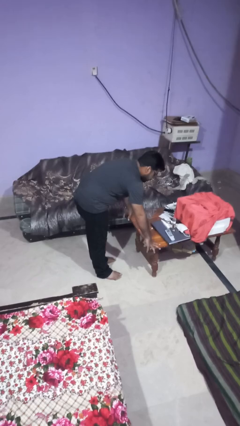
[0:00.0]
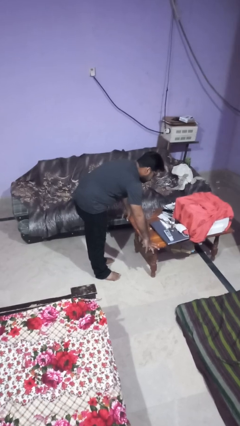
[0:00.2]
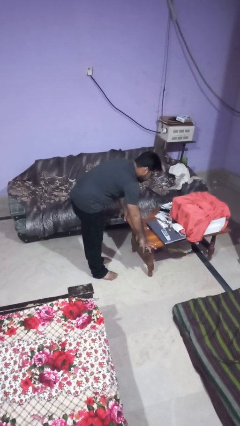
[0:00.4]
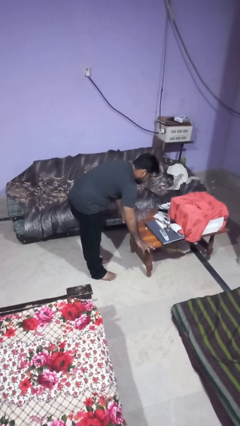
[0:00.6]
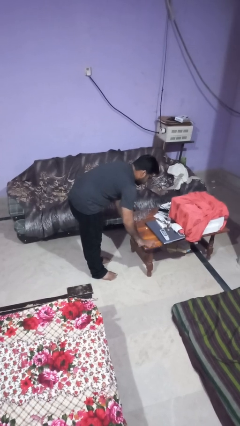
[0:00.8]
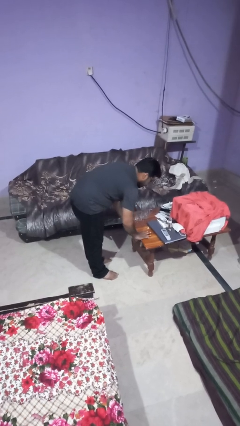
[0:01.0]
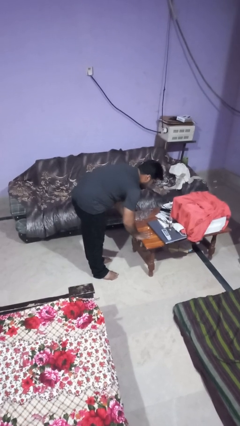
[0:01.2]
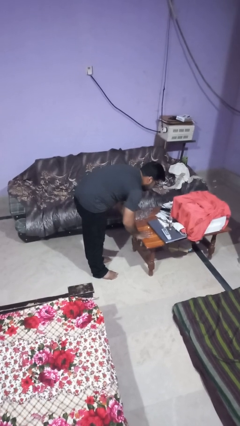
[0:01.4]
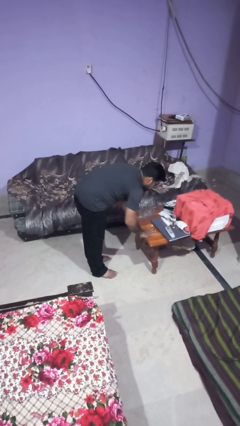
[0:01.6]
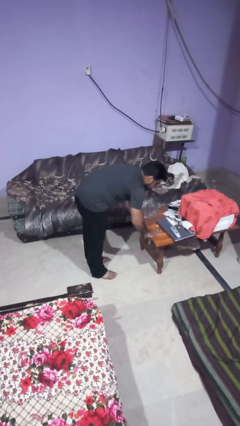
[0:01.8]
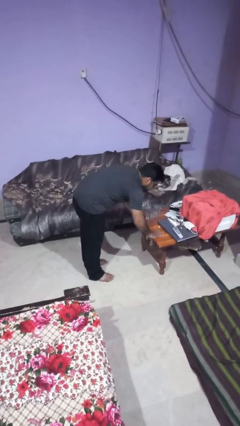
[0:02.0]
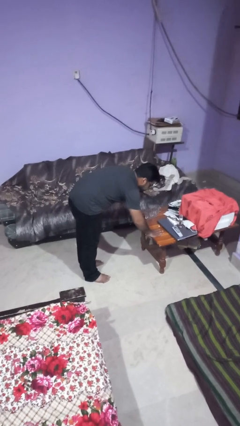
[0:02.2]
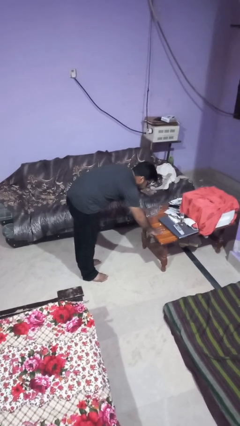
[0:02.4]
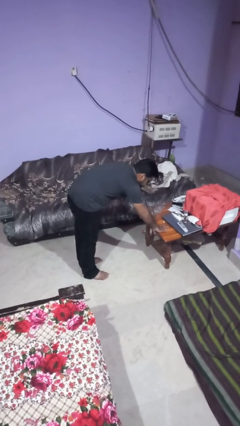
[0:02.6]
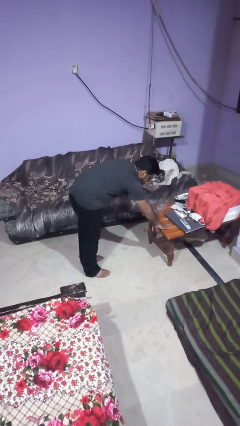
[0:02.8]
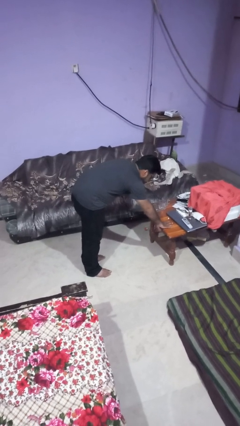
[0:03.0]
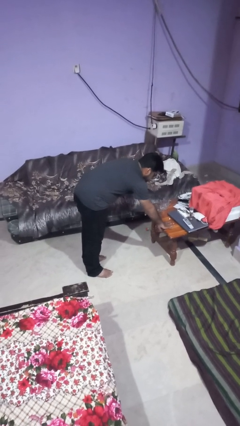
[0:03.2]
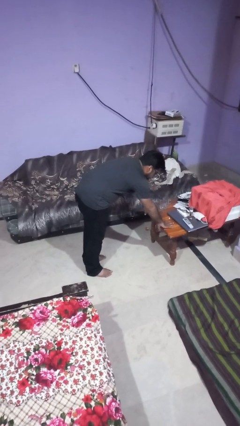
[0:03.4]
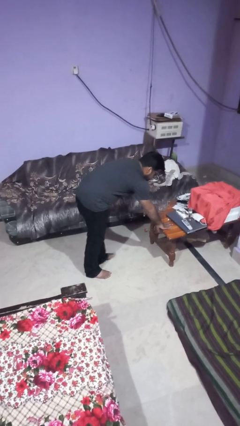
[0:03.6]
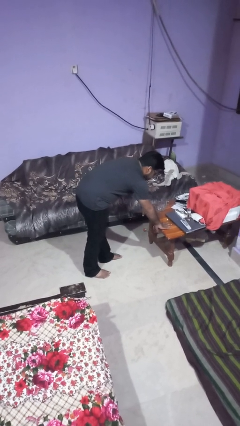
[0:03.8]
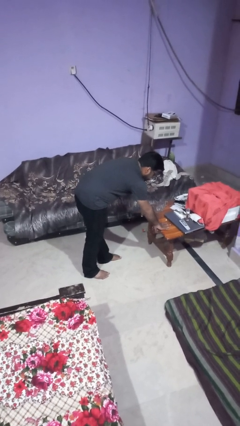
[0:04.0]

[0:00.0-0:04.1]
person pushes wheeled cart

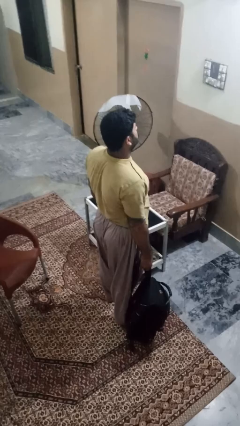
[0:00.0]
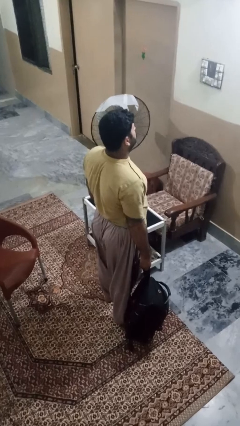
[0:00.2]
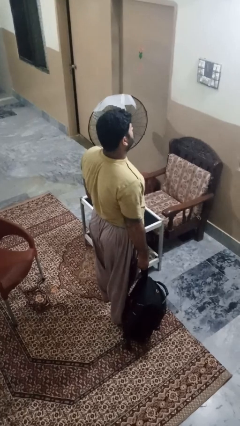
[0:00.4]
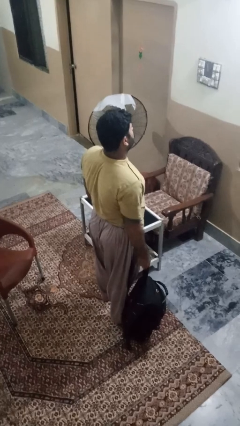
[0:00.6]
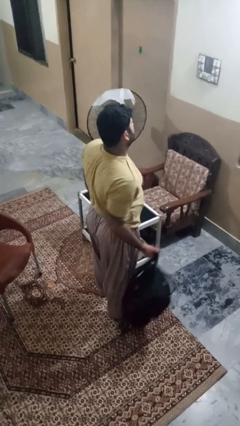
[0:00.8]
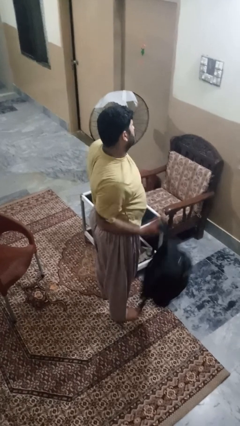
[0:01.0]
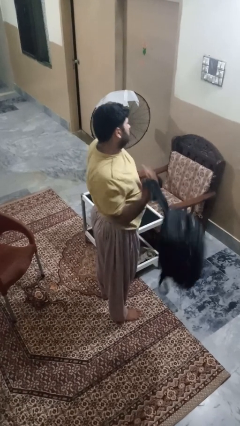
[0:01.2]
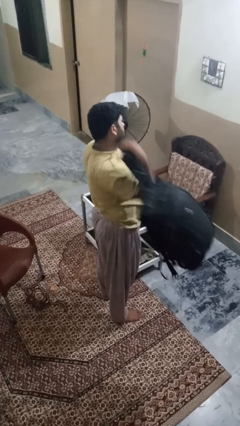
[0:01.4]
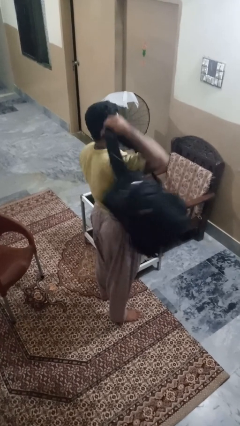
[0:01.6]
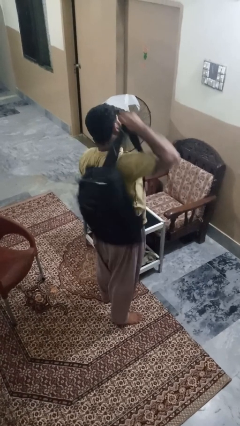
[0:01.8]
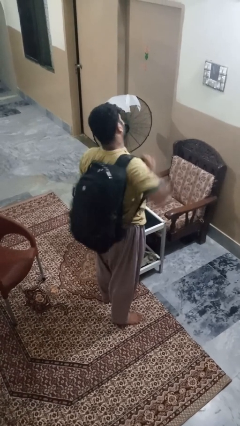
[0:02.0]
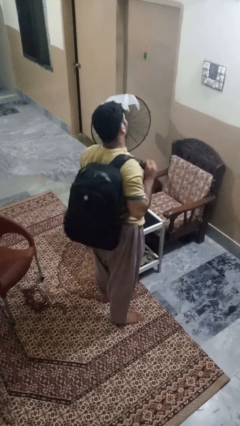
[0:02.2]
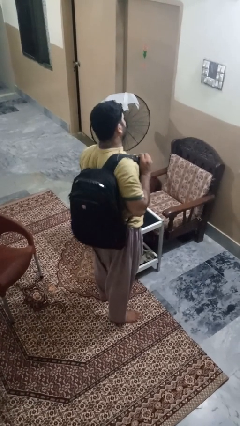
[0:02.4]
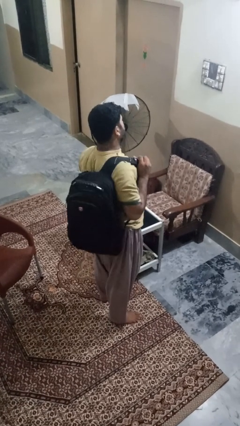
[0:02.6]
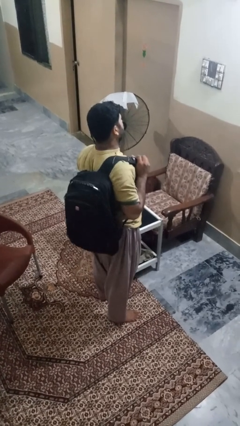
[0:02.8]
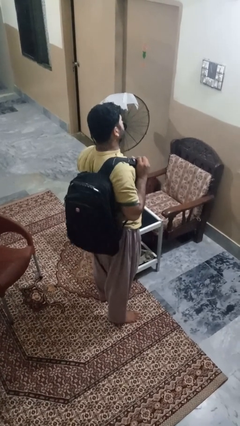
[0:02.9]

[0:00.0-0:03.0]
person puts on backpack

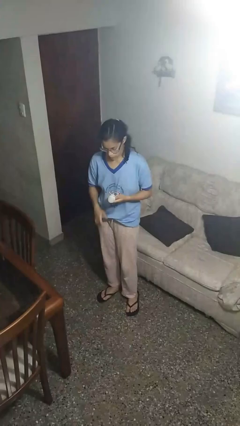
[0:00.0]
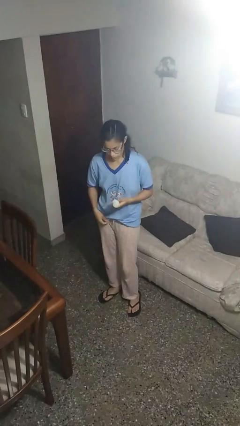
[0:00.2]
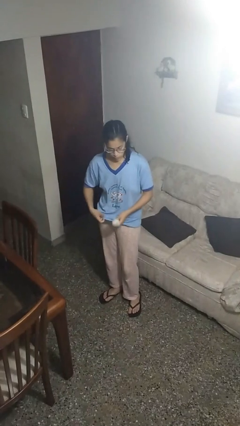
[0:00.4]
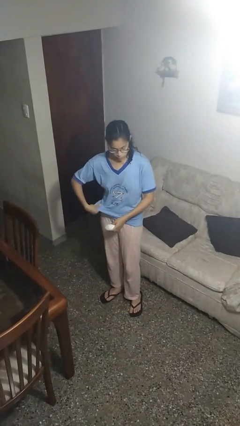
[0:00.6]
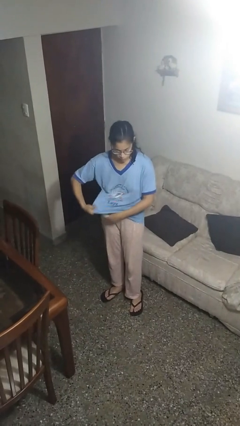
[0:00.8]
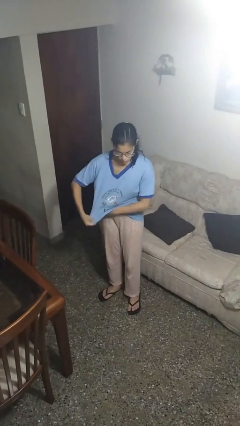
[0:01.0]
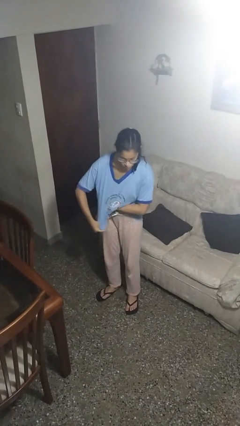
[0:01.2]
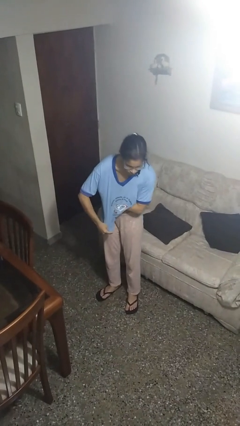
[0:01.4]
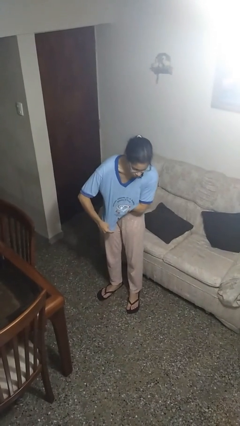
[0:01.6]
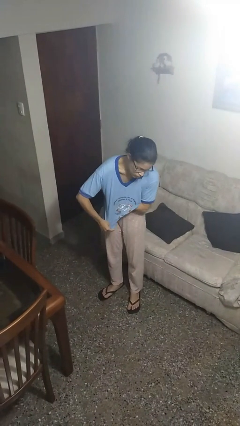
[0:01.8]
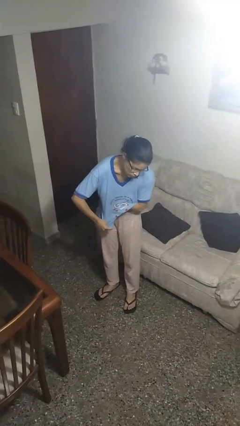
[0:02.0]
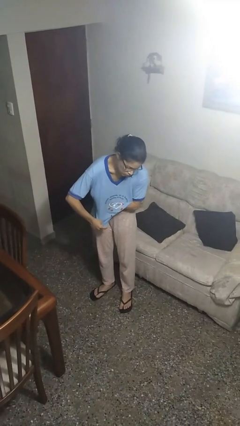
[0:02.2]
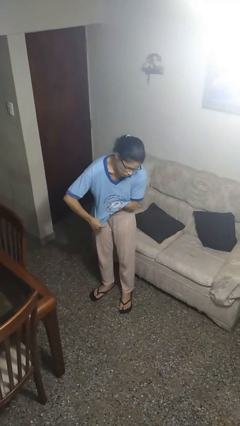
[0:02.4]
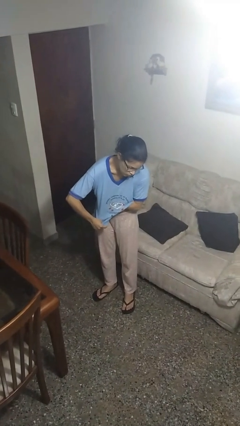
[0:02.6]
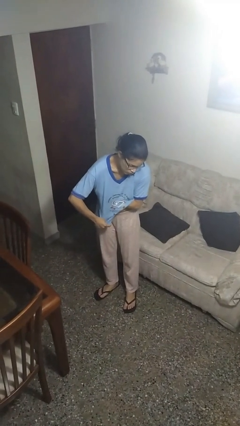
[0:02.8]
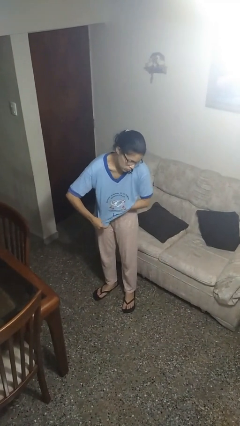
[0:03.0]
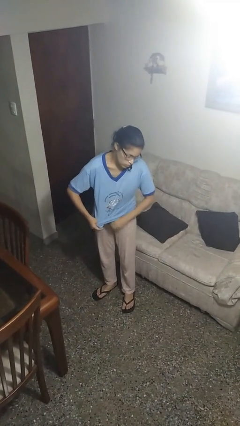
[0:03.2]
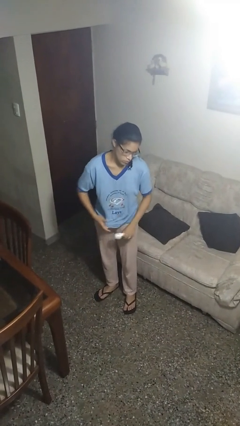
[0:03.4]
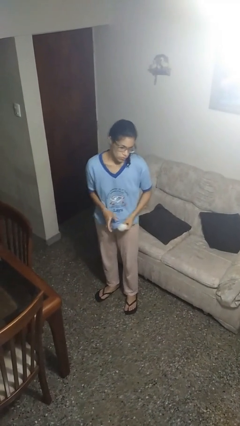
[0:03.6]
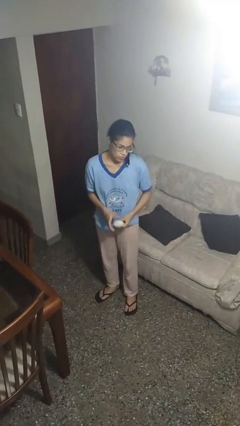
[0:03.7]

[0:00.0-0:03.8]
person applies deodorant

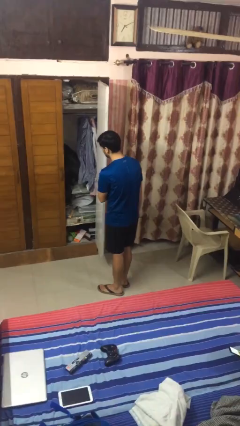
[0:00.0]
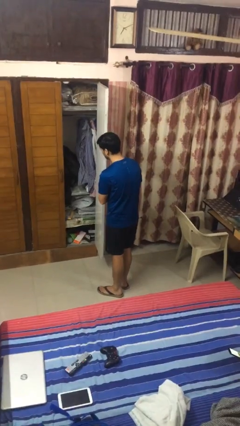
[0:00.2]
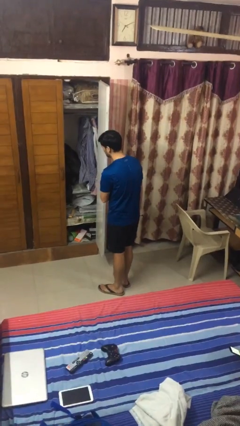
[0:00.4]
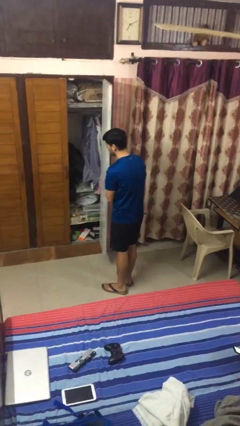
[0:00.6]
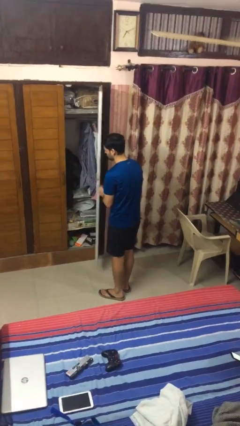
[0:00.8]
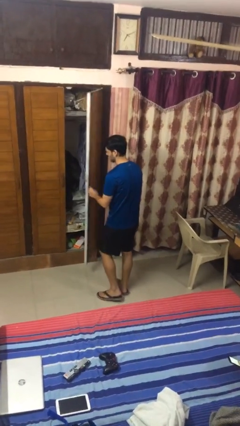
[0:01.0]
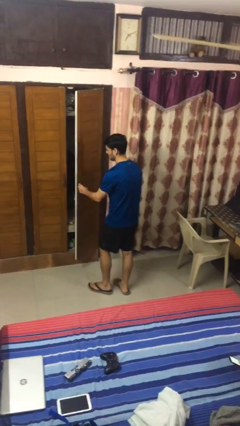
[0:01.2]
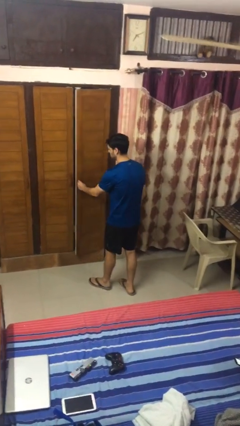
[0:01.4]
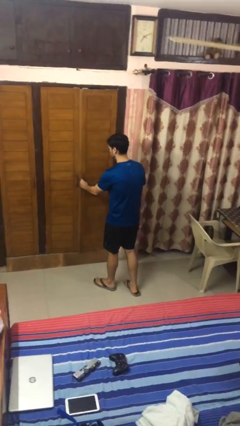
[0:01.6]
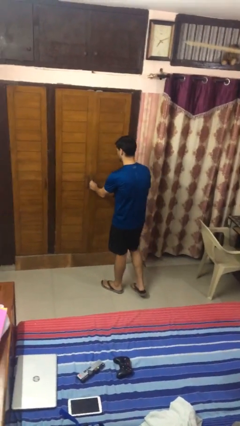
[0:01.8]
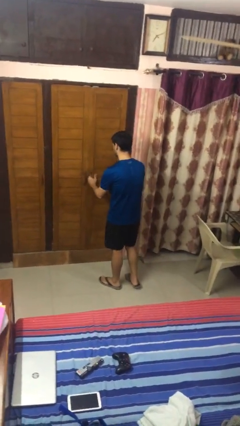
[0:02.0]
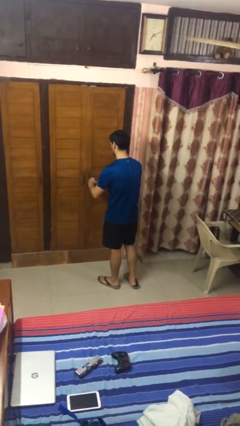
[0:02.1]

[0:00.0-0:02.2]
person closes facility door

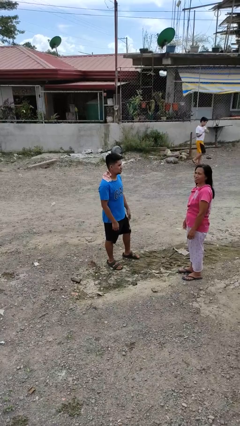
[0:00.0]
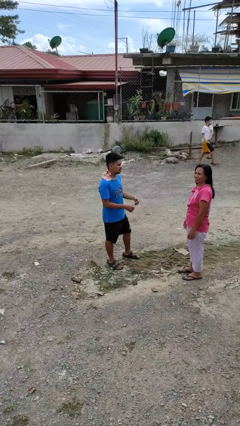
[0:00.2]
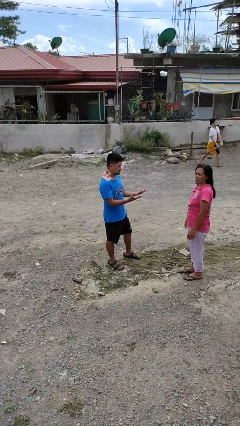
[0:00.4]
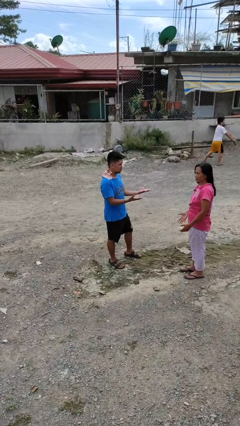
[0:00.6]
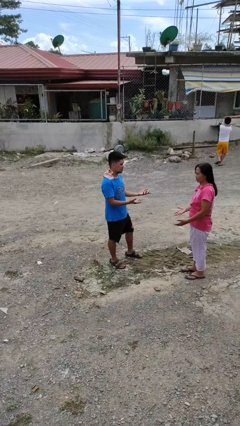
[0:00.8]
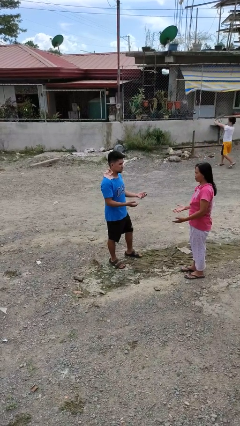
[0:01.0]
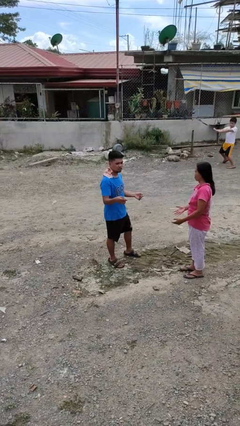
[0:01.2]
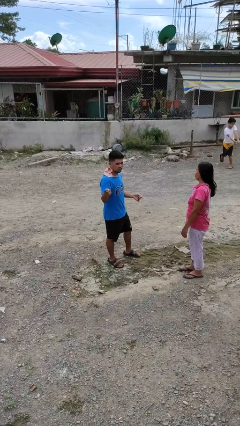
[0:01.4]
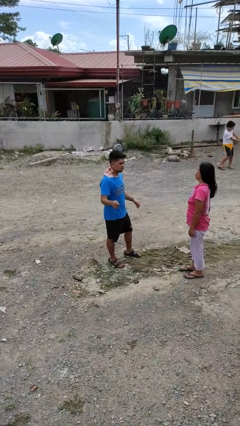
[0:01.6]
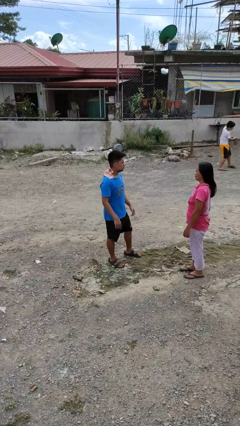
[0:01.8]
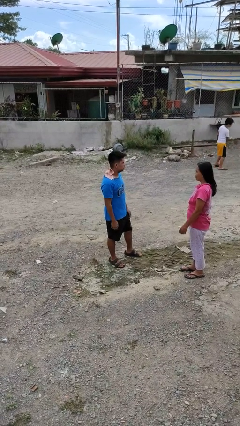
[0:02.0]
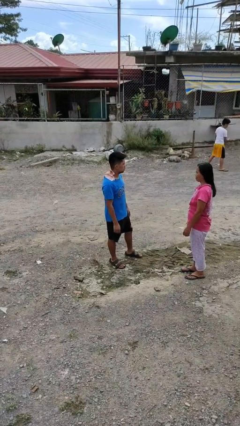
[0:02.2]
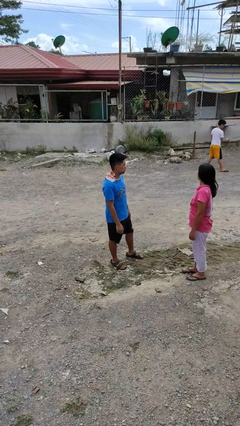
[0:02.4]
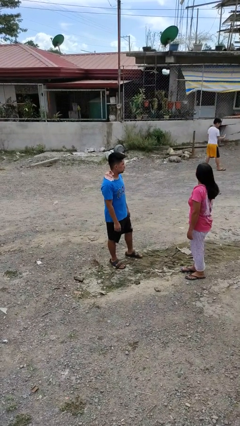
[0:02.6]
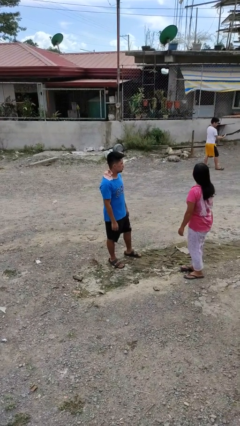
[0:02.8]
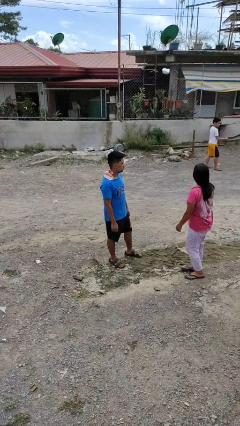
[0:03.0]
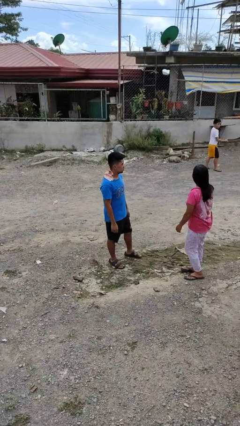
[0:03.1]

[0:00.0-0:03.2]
person talks to person

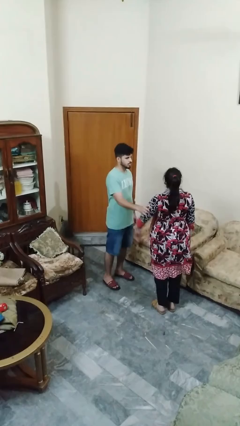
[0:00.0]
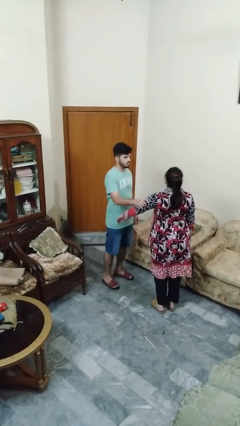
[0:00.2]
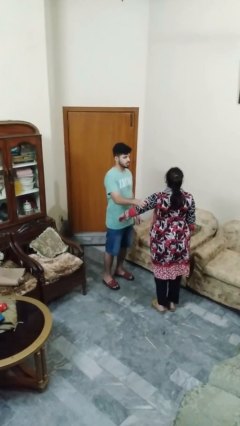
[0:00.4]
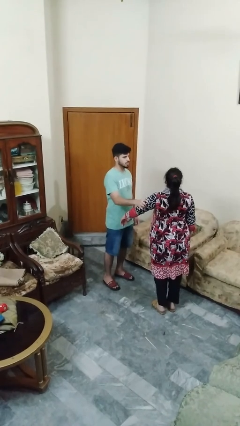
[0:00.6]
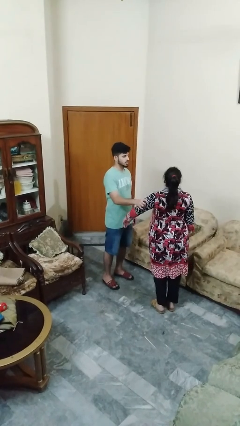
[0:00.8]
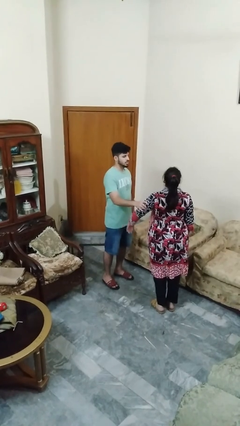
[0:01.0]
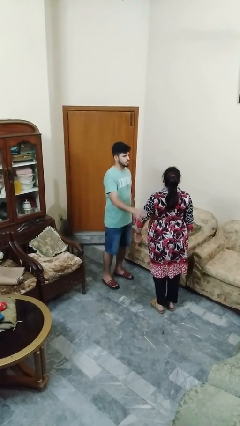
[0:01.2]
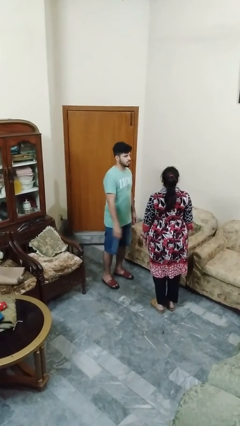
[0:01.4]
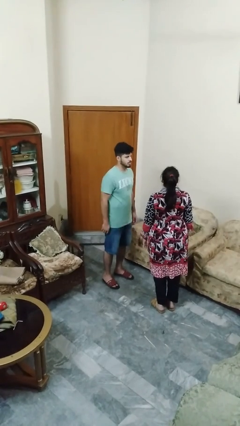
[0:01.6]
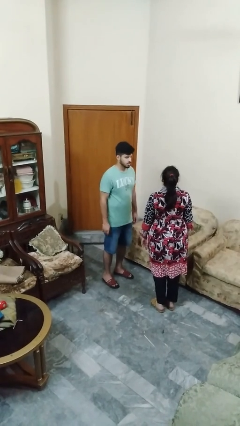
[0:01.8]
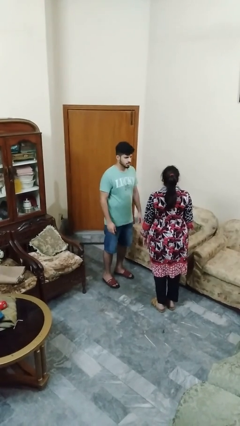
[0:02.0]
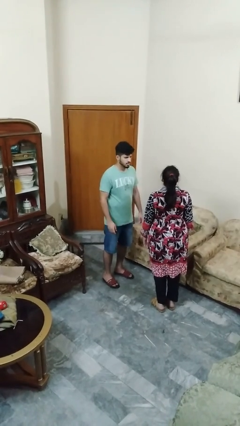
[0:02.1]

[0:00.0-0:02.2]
person grabs person by bicep
